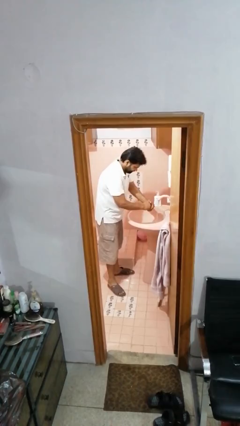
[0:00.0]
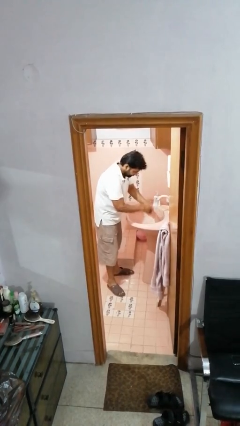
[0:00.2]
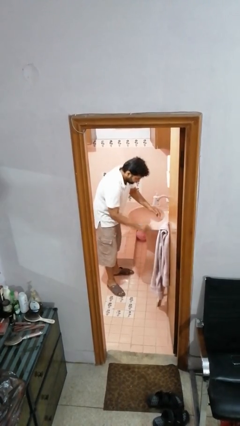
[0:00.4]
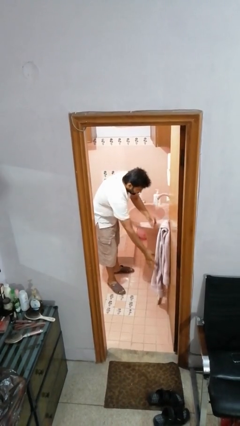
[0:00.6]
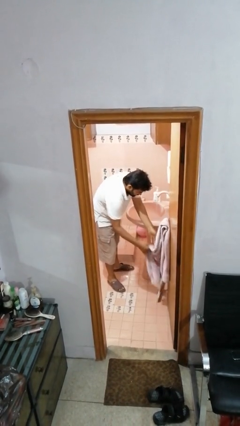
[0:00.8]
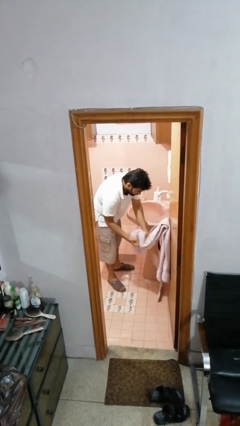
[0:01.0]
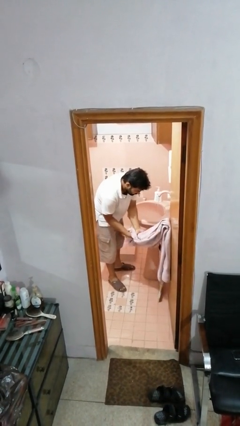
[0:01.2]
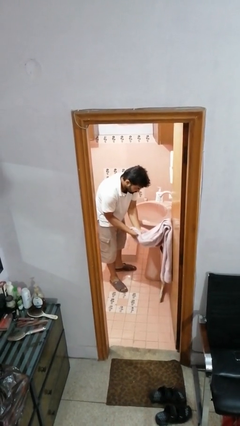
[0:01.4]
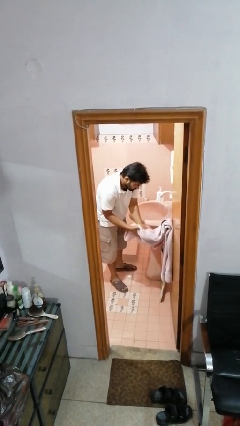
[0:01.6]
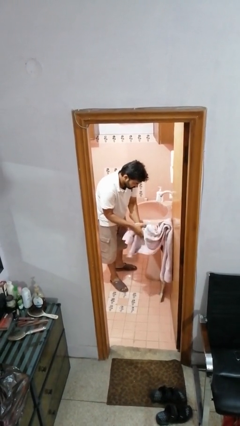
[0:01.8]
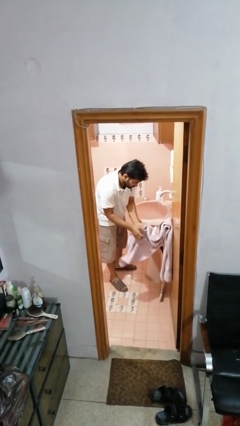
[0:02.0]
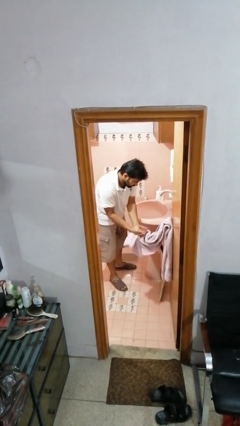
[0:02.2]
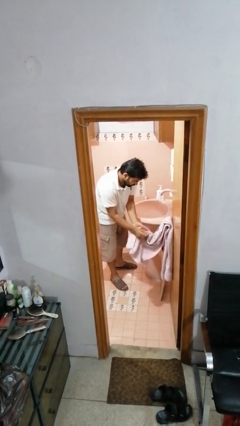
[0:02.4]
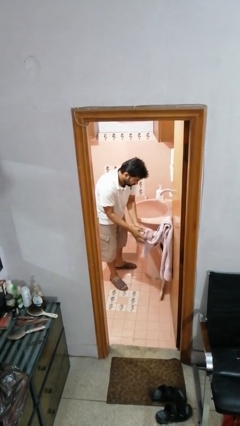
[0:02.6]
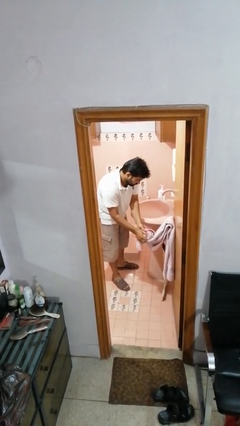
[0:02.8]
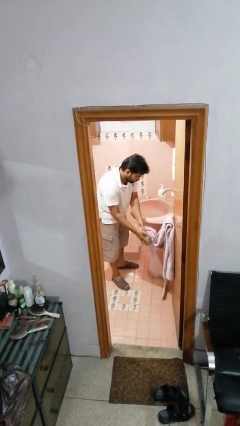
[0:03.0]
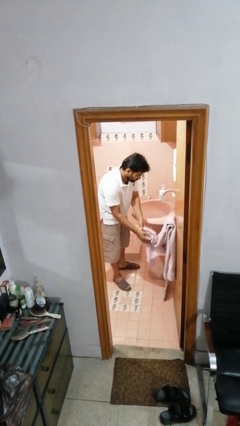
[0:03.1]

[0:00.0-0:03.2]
person dries hands with towel

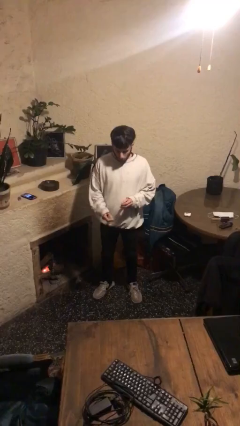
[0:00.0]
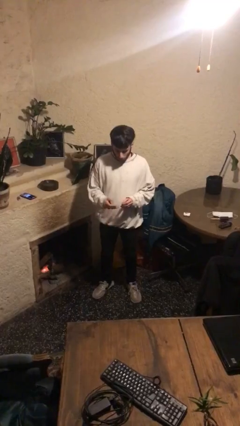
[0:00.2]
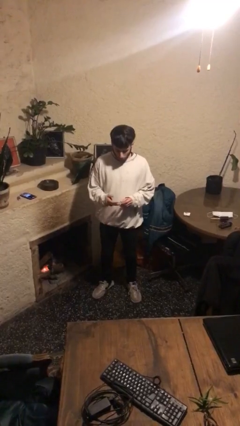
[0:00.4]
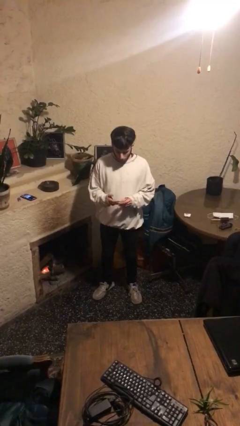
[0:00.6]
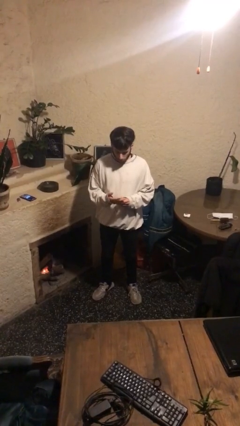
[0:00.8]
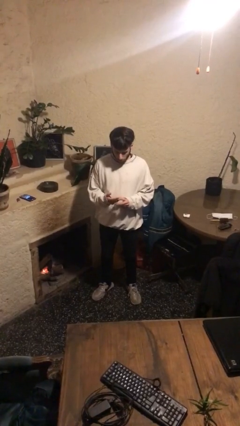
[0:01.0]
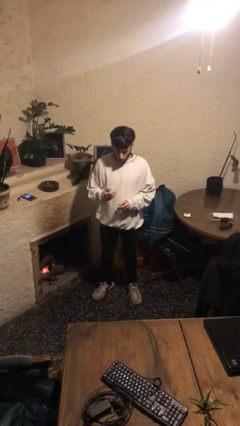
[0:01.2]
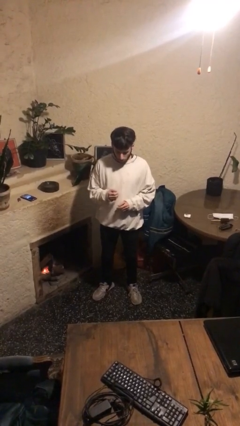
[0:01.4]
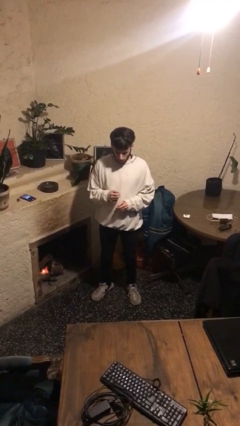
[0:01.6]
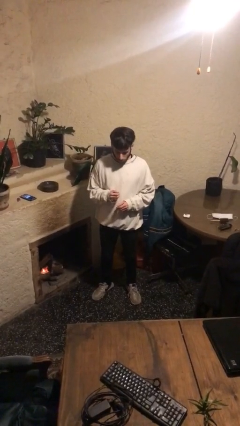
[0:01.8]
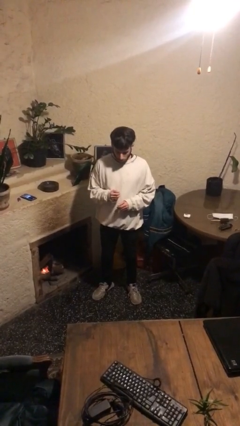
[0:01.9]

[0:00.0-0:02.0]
person puts on ring

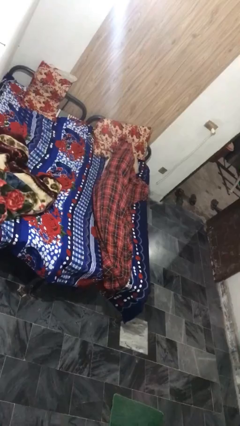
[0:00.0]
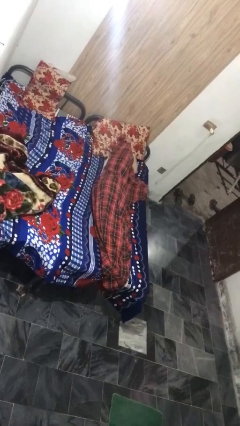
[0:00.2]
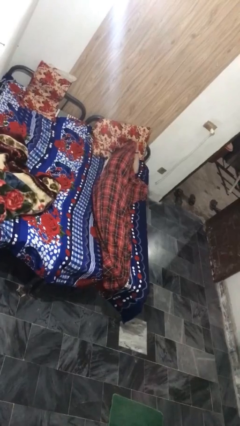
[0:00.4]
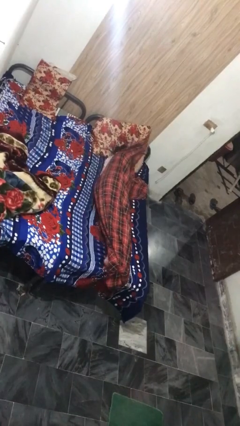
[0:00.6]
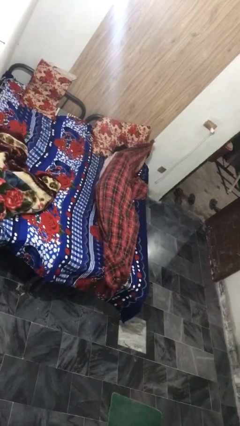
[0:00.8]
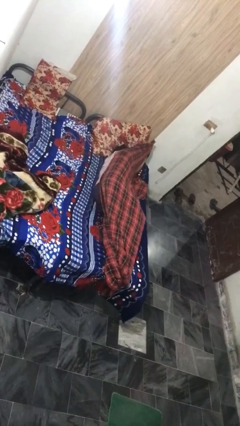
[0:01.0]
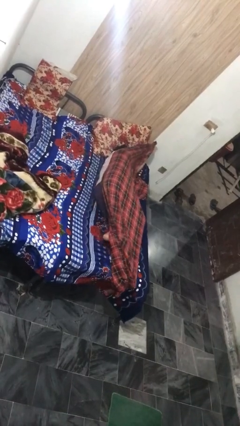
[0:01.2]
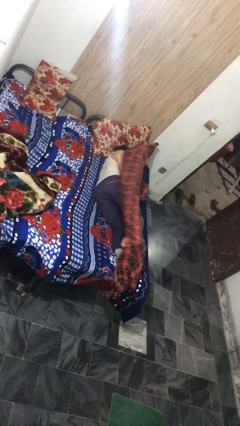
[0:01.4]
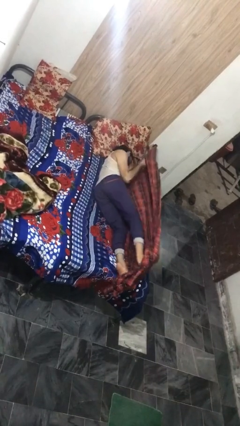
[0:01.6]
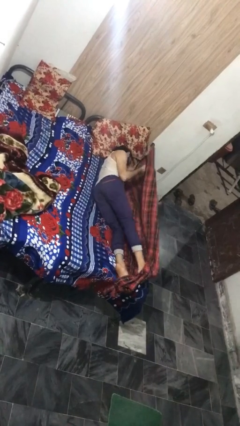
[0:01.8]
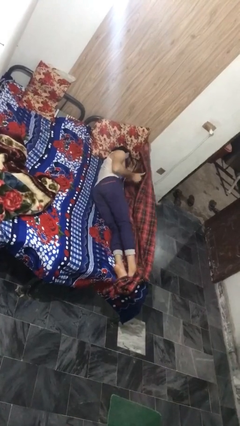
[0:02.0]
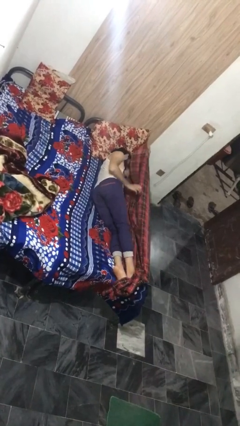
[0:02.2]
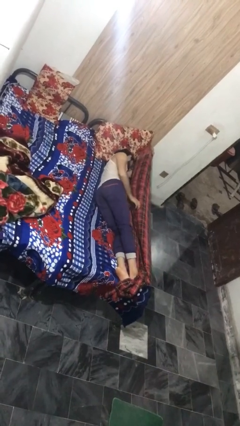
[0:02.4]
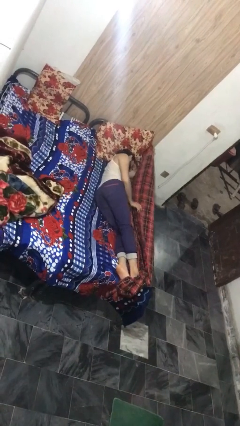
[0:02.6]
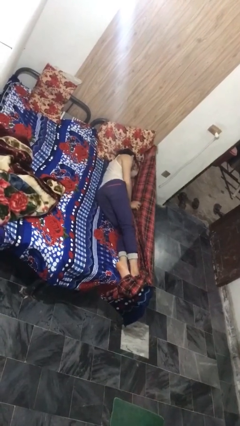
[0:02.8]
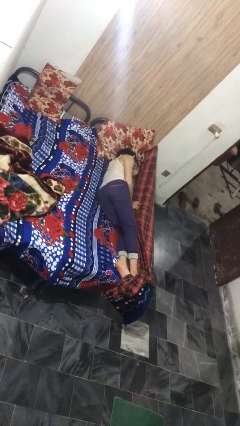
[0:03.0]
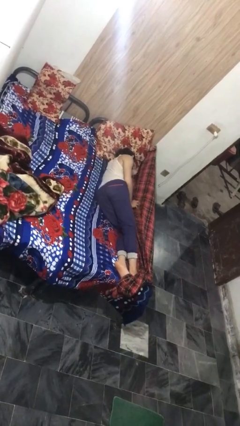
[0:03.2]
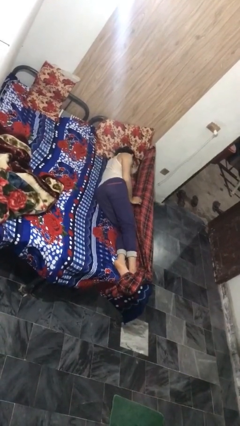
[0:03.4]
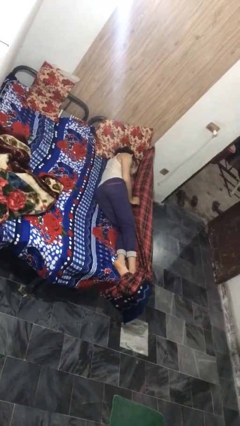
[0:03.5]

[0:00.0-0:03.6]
person uncovers with bedsheets

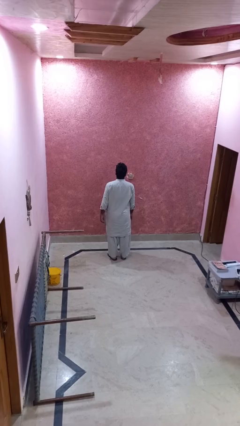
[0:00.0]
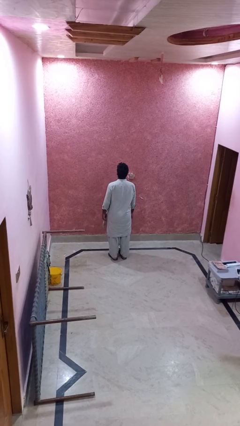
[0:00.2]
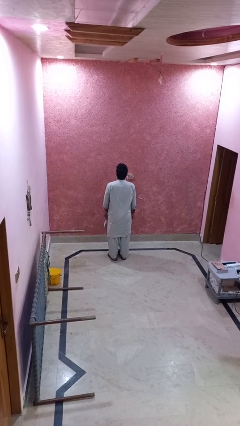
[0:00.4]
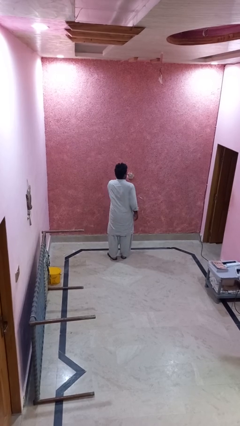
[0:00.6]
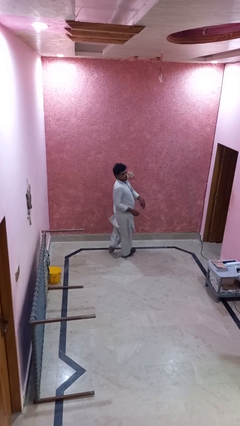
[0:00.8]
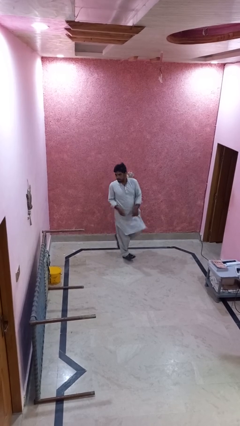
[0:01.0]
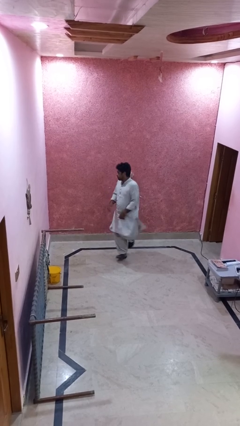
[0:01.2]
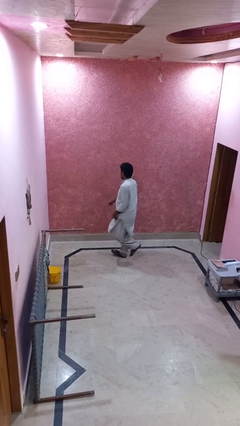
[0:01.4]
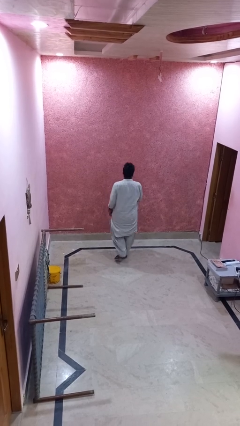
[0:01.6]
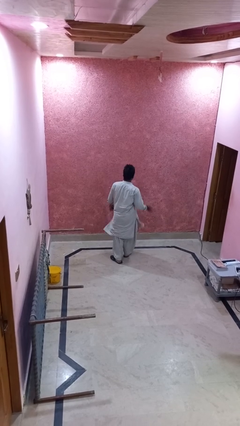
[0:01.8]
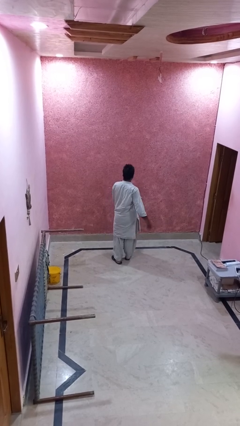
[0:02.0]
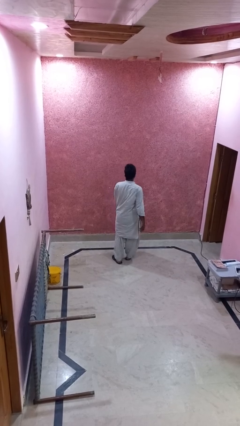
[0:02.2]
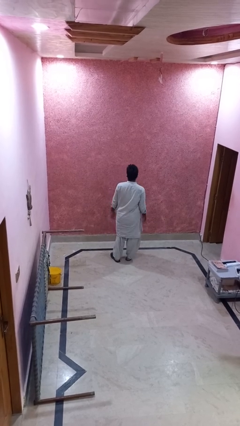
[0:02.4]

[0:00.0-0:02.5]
person twirls

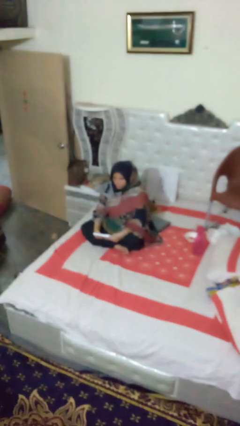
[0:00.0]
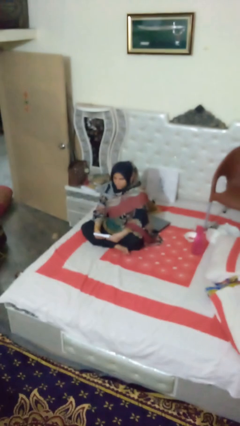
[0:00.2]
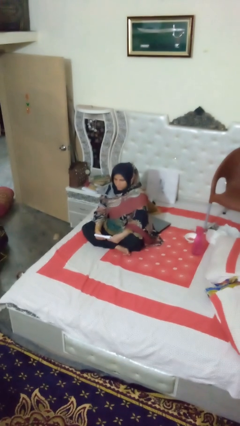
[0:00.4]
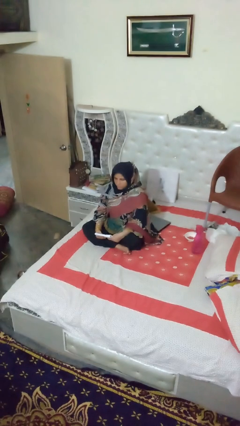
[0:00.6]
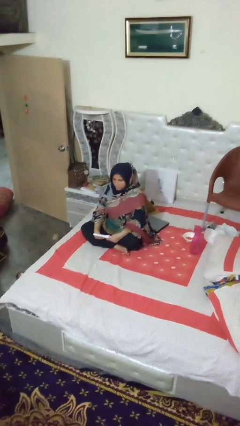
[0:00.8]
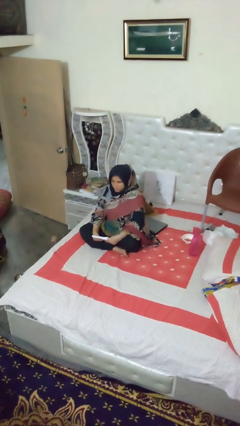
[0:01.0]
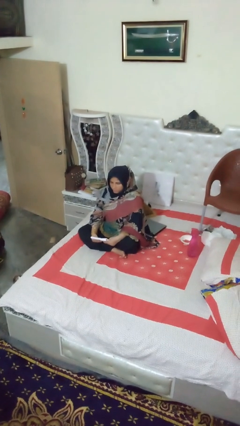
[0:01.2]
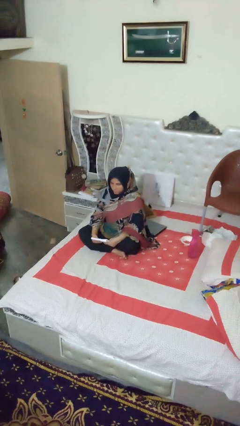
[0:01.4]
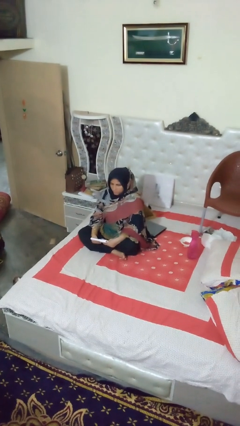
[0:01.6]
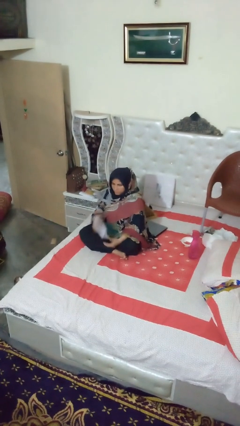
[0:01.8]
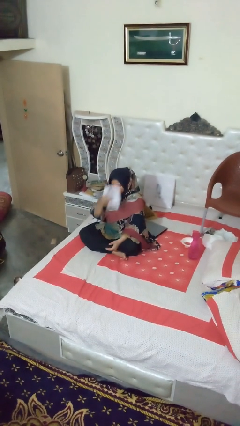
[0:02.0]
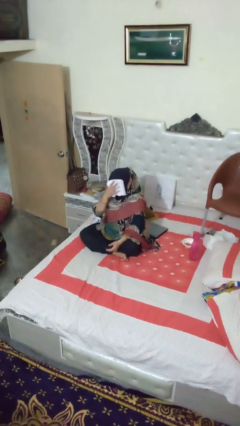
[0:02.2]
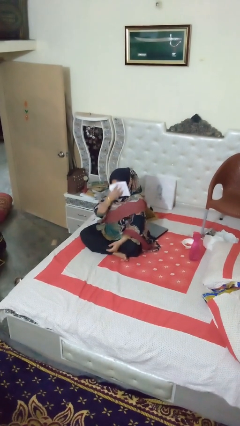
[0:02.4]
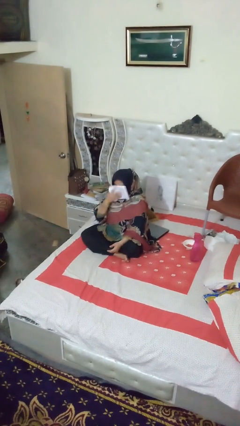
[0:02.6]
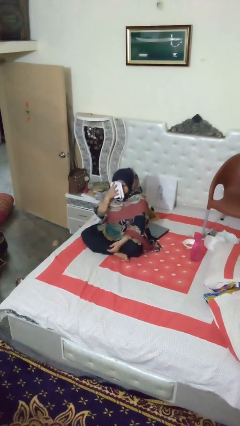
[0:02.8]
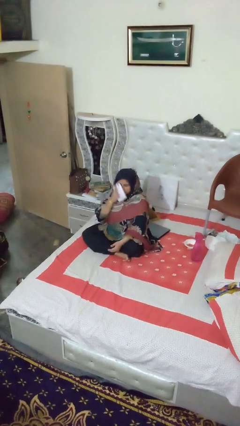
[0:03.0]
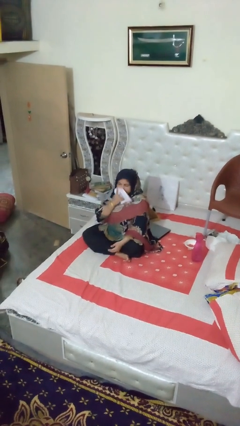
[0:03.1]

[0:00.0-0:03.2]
person wipes mouth with napkin

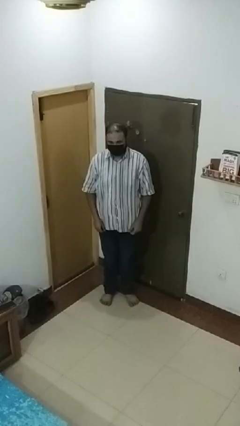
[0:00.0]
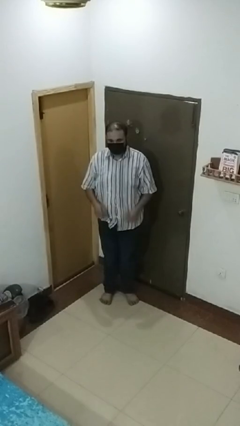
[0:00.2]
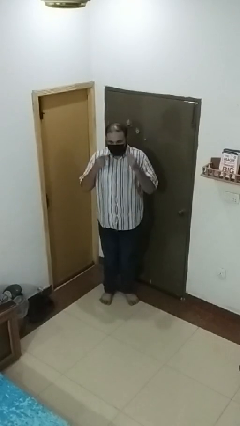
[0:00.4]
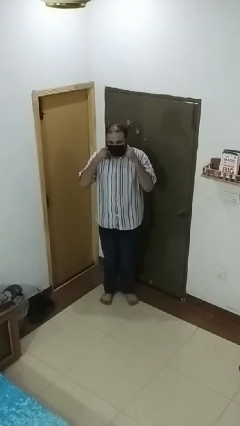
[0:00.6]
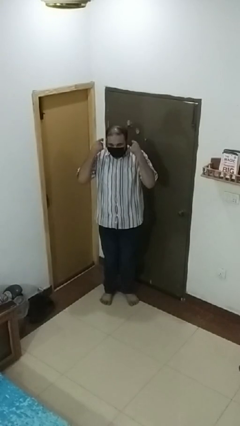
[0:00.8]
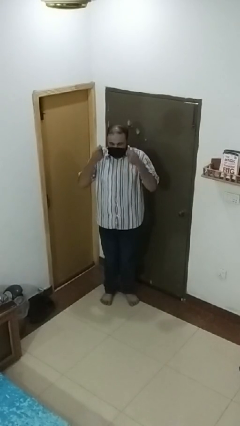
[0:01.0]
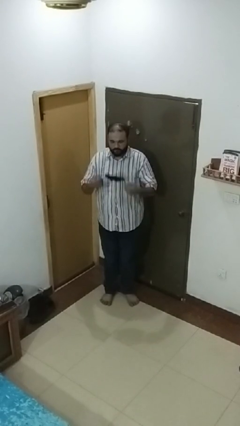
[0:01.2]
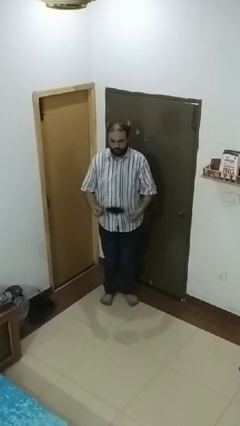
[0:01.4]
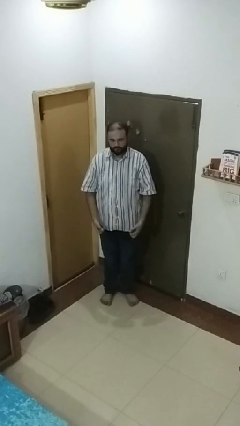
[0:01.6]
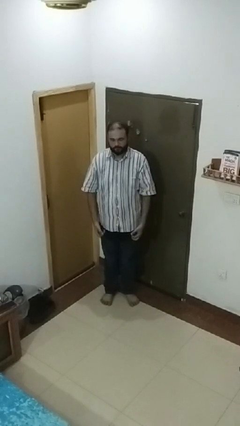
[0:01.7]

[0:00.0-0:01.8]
person takes off facemask

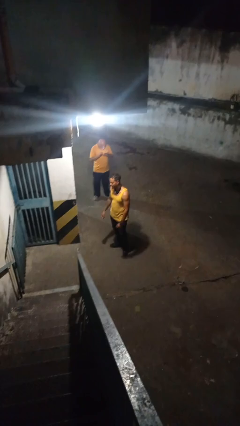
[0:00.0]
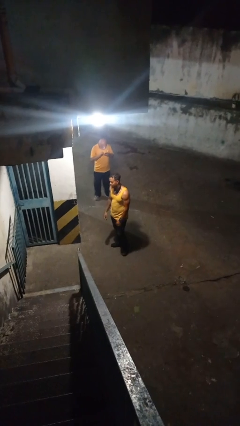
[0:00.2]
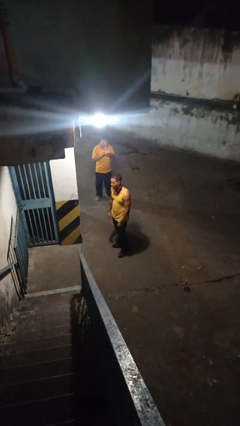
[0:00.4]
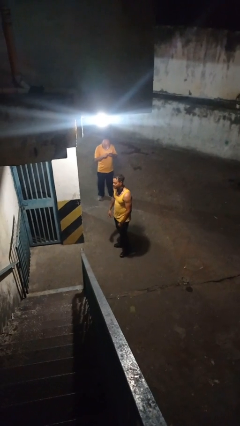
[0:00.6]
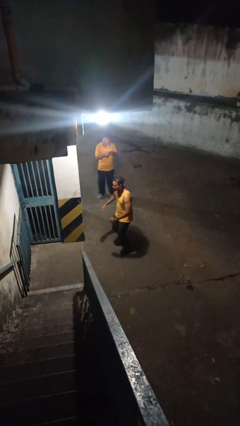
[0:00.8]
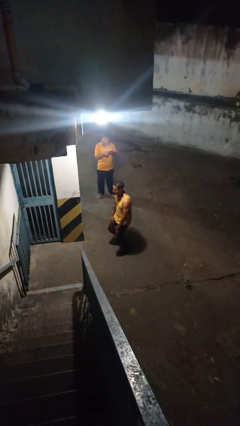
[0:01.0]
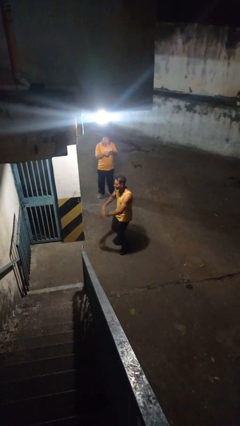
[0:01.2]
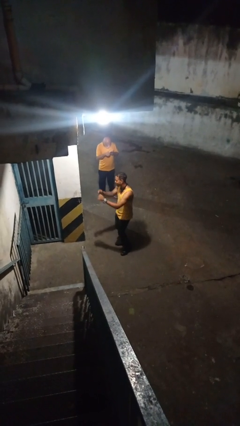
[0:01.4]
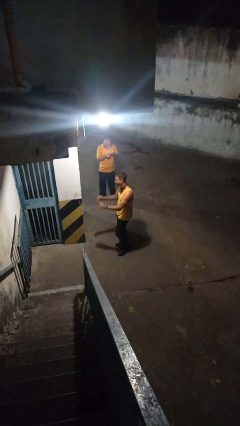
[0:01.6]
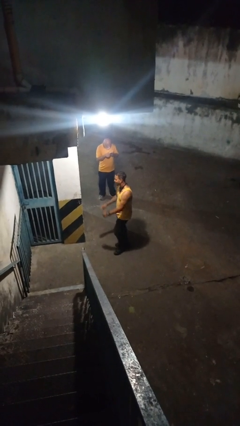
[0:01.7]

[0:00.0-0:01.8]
person slaps hands on thighs
